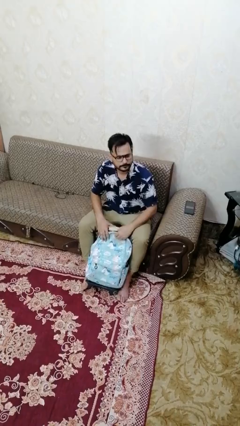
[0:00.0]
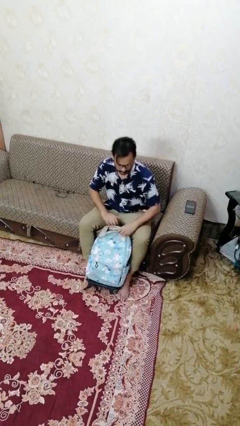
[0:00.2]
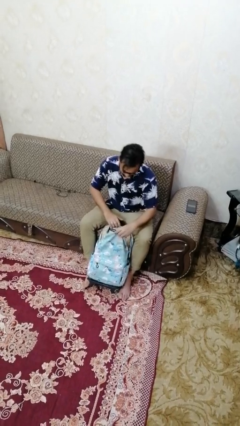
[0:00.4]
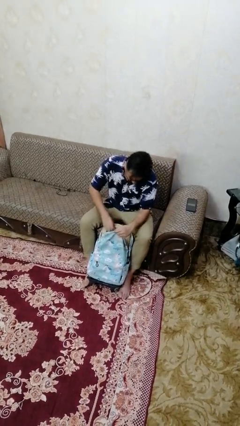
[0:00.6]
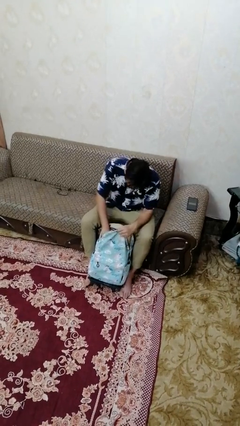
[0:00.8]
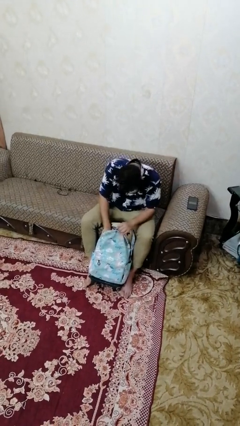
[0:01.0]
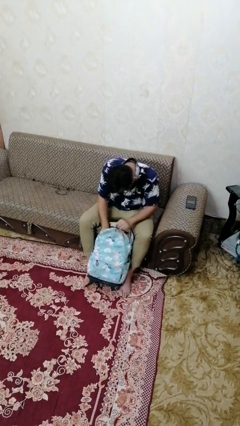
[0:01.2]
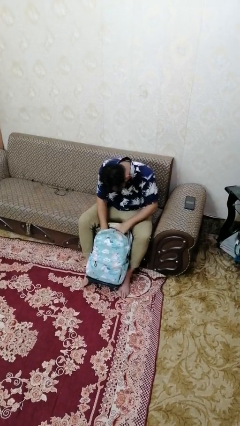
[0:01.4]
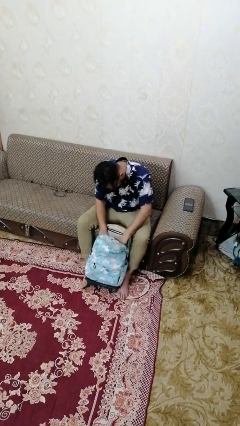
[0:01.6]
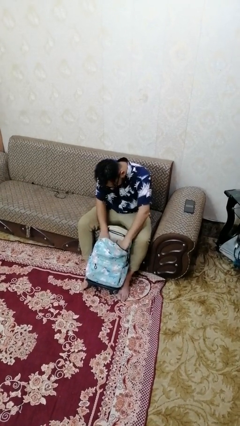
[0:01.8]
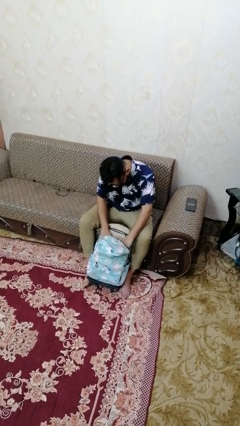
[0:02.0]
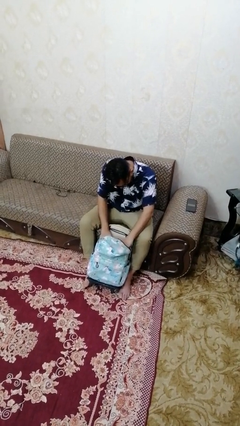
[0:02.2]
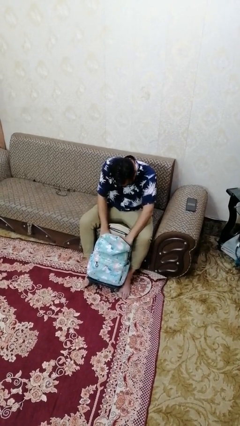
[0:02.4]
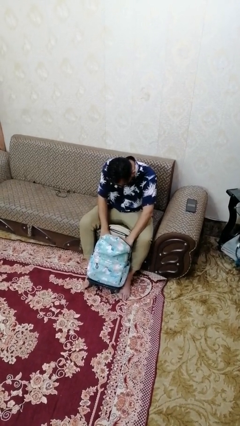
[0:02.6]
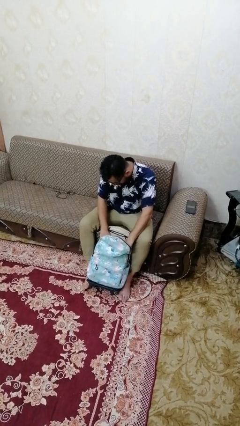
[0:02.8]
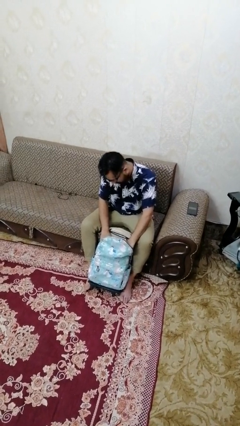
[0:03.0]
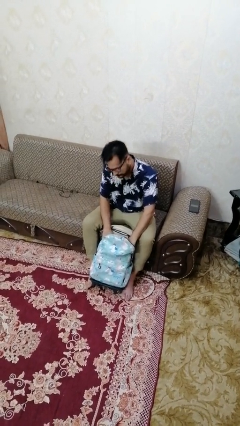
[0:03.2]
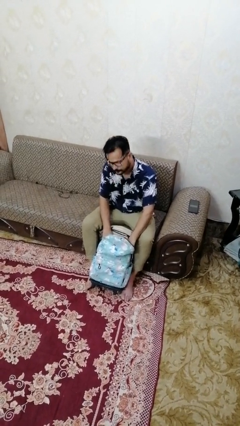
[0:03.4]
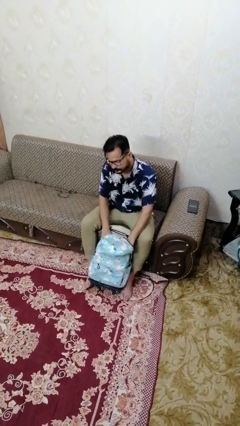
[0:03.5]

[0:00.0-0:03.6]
person searches in backpack

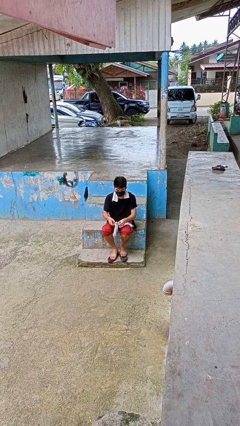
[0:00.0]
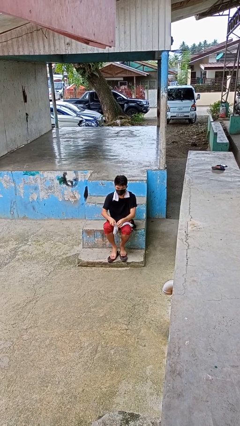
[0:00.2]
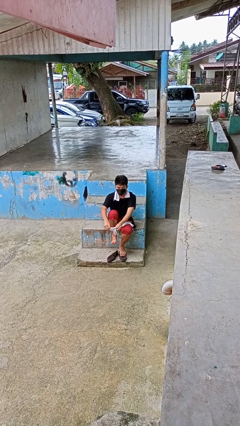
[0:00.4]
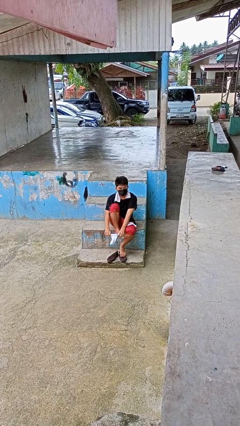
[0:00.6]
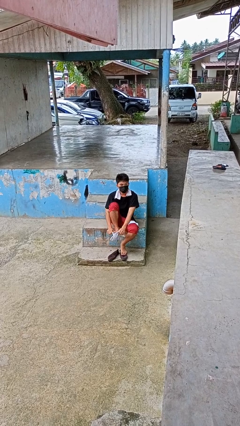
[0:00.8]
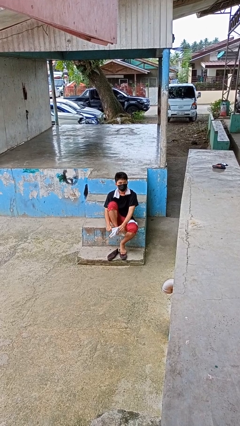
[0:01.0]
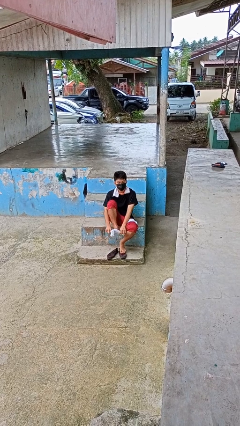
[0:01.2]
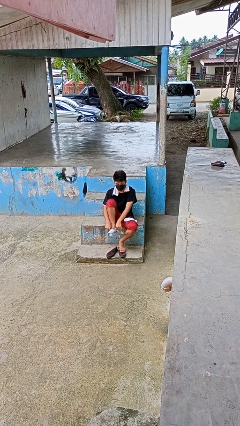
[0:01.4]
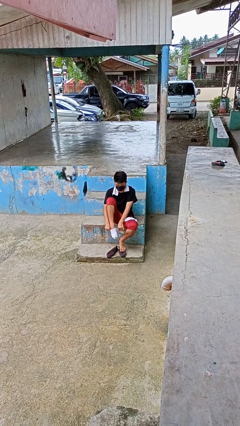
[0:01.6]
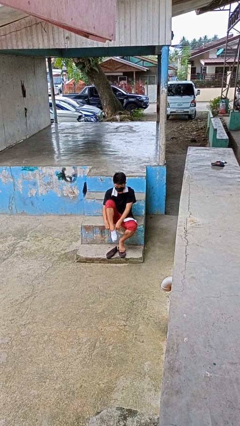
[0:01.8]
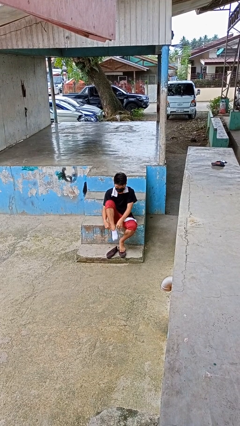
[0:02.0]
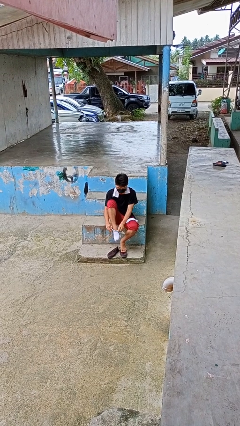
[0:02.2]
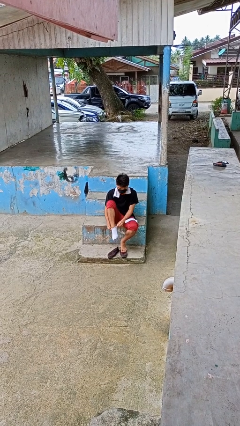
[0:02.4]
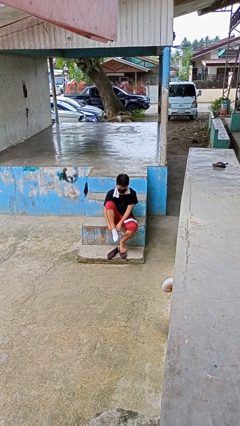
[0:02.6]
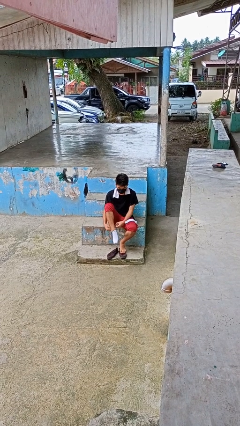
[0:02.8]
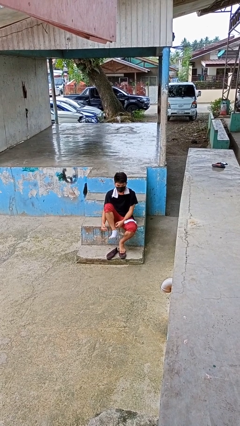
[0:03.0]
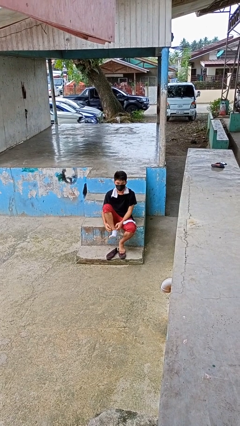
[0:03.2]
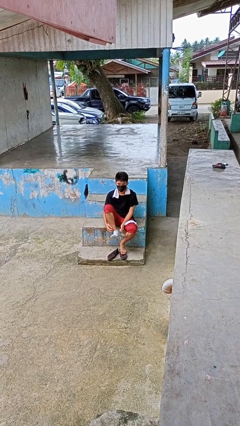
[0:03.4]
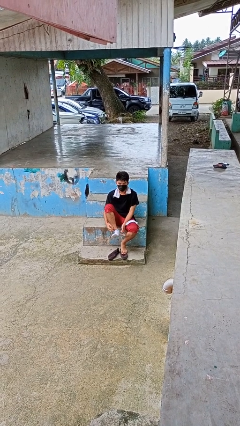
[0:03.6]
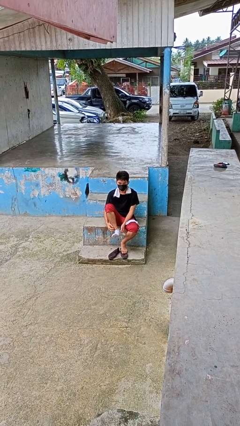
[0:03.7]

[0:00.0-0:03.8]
person puts on socks

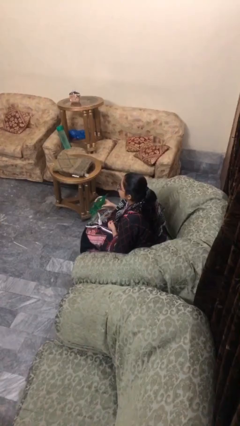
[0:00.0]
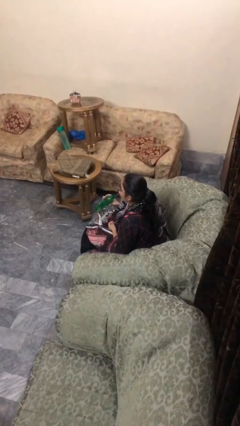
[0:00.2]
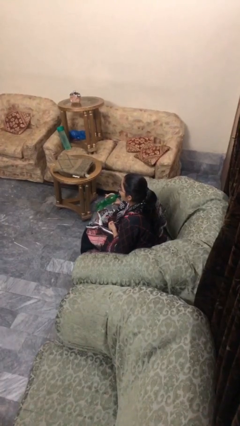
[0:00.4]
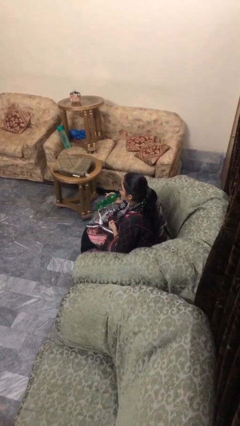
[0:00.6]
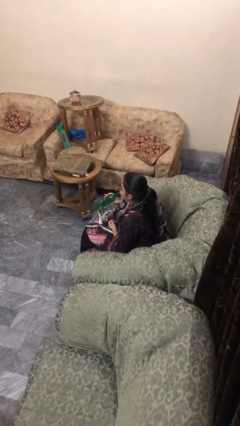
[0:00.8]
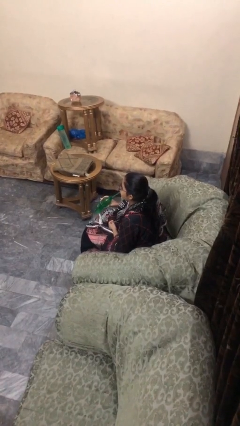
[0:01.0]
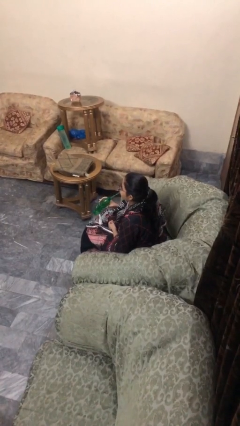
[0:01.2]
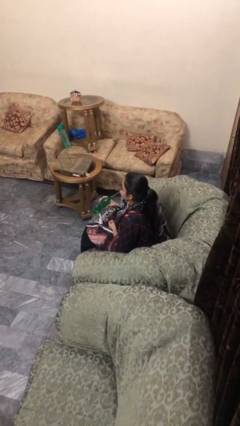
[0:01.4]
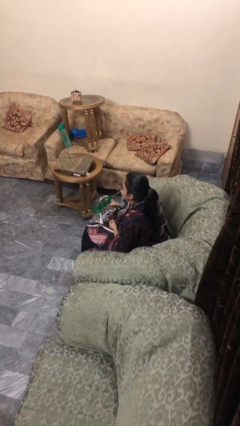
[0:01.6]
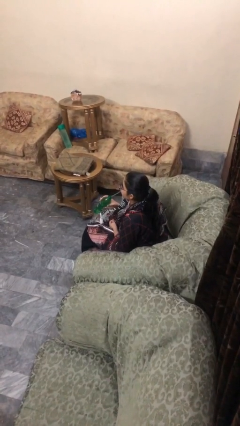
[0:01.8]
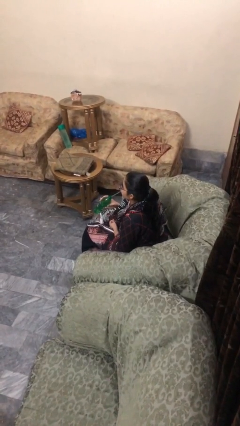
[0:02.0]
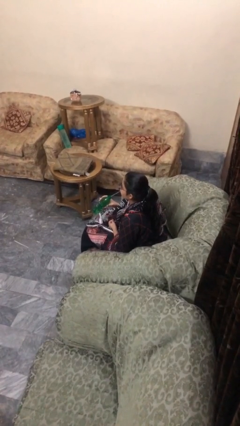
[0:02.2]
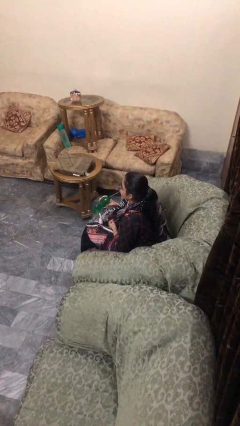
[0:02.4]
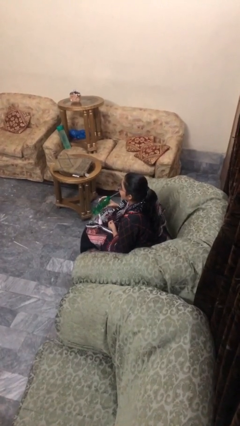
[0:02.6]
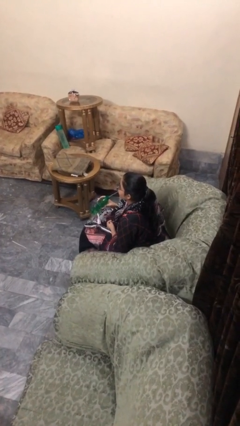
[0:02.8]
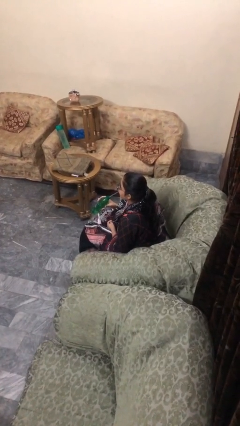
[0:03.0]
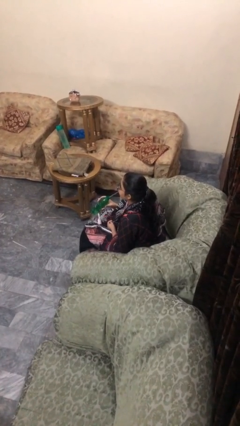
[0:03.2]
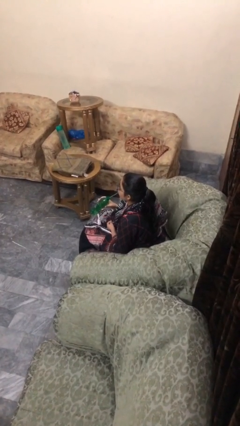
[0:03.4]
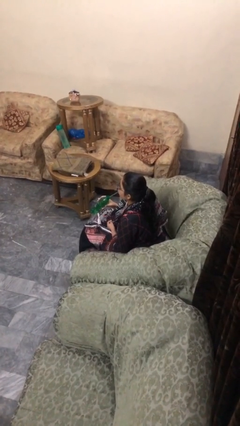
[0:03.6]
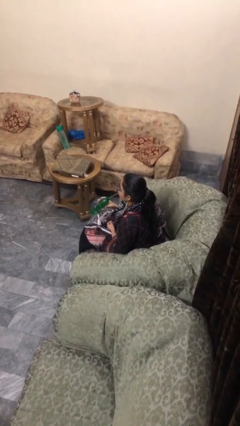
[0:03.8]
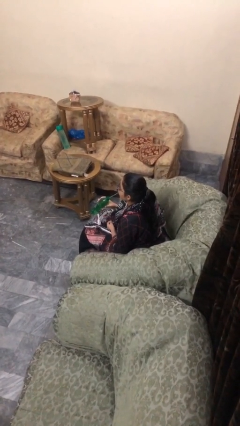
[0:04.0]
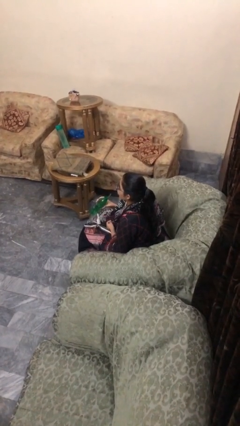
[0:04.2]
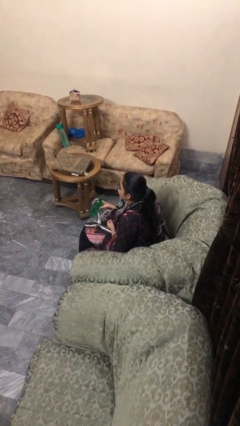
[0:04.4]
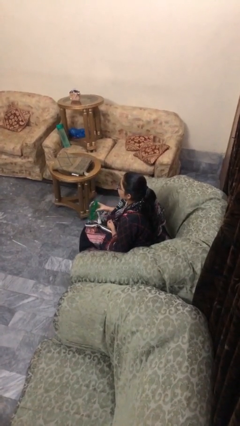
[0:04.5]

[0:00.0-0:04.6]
person drinks from straw

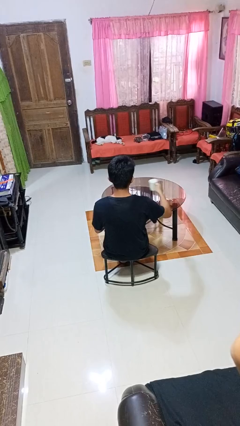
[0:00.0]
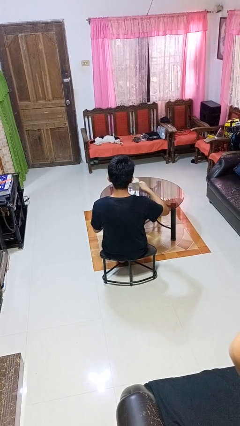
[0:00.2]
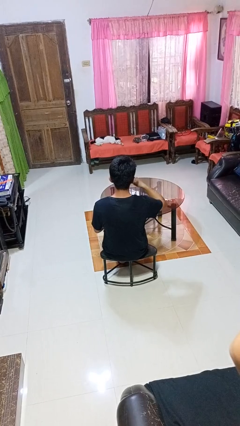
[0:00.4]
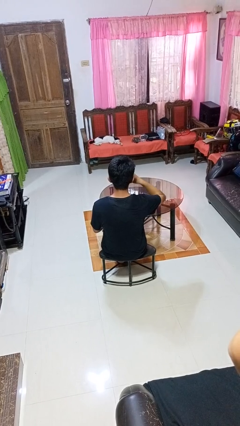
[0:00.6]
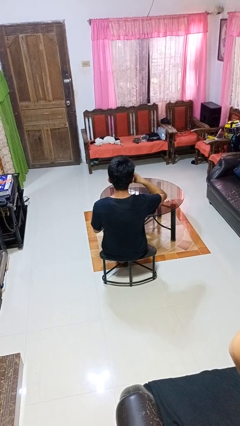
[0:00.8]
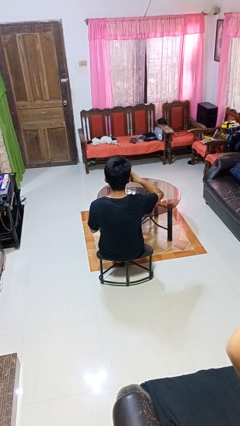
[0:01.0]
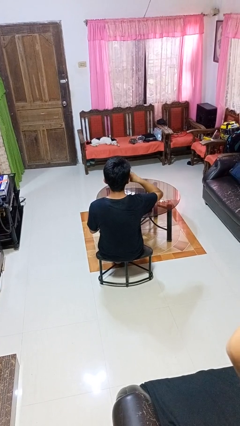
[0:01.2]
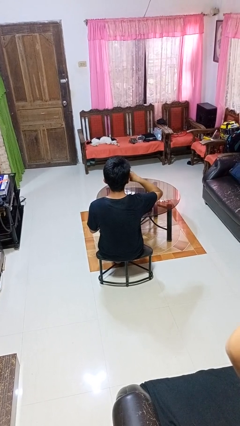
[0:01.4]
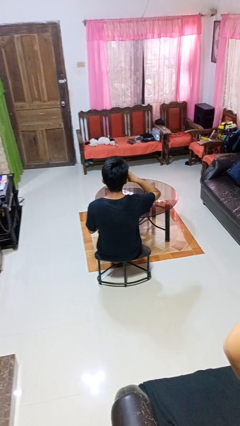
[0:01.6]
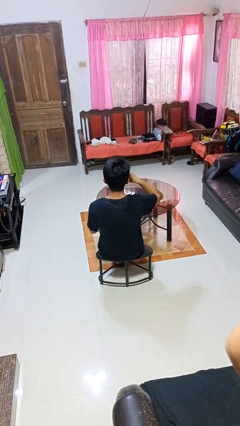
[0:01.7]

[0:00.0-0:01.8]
person drinks from mug

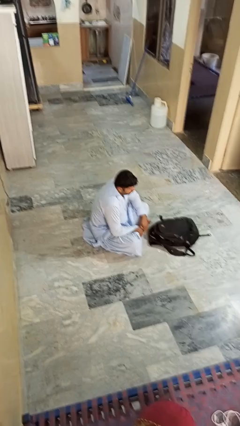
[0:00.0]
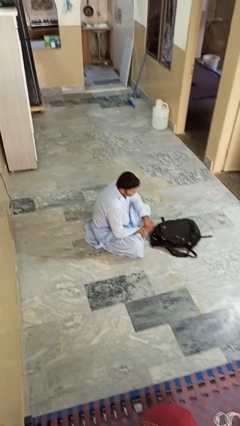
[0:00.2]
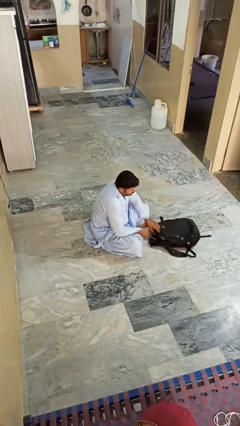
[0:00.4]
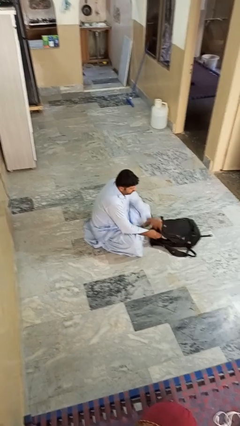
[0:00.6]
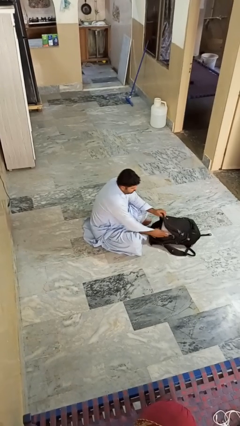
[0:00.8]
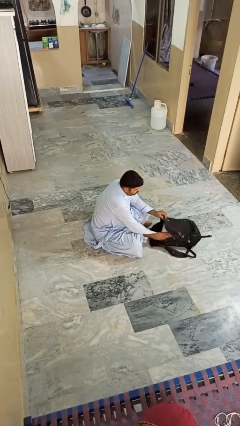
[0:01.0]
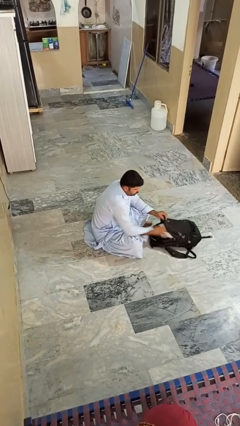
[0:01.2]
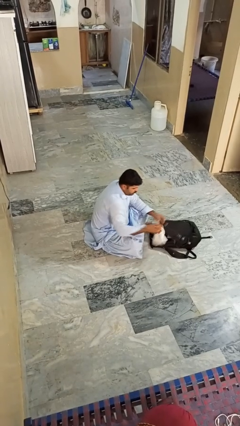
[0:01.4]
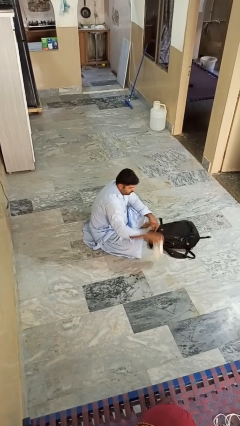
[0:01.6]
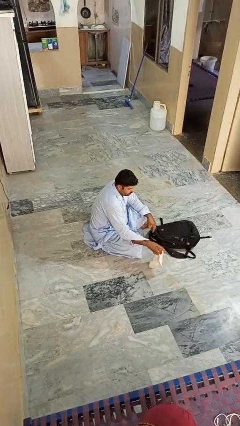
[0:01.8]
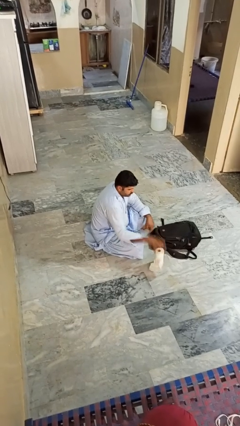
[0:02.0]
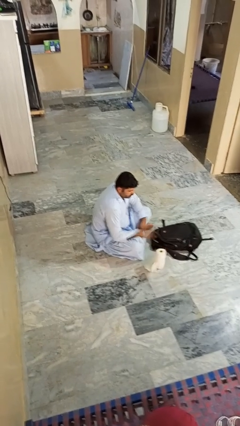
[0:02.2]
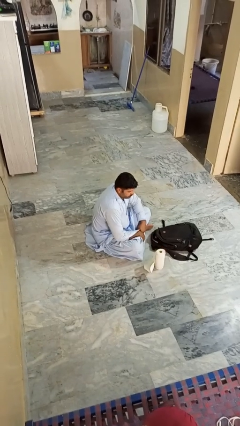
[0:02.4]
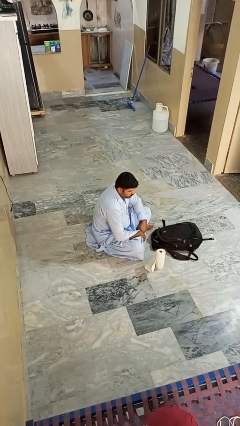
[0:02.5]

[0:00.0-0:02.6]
person takes object from bag

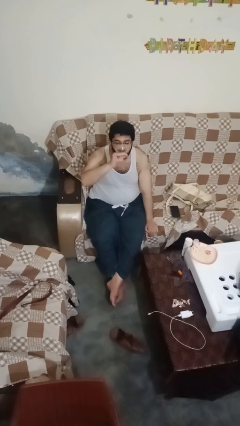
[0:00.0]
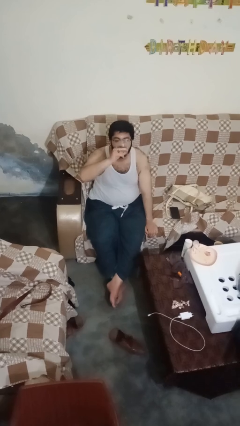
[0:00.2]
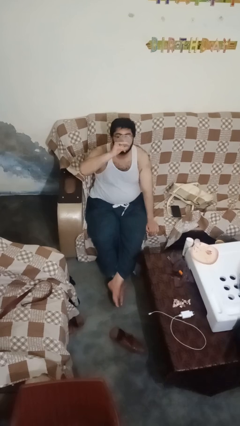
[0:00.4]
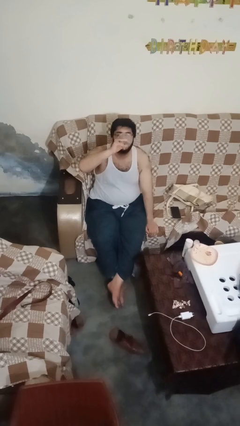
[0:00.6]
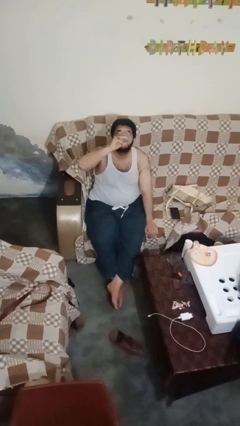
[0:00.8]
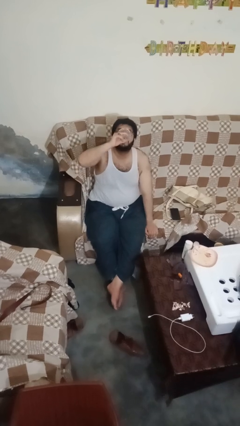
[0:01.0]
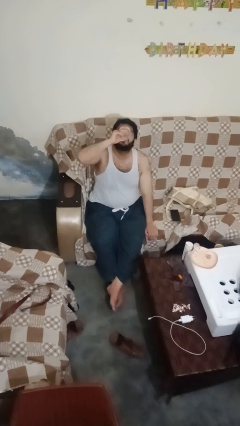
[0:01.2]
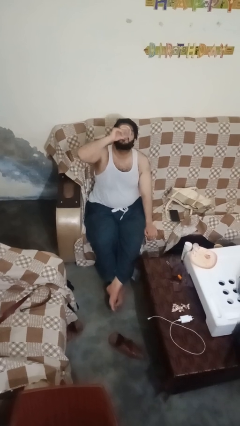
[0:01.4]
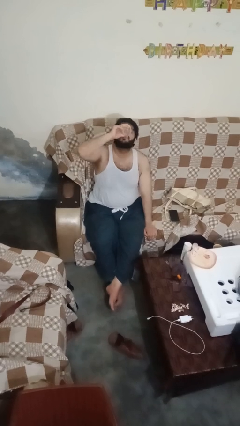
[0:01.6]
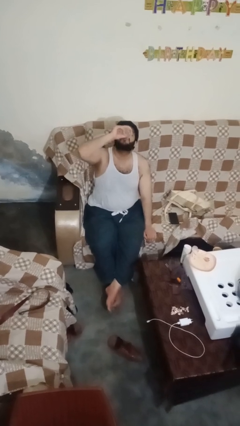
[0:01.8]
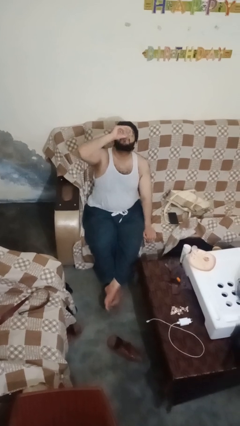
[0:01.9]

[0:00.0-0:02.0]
person drinks from shotglass
